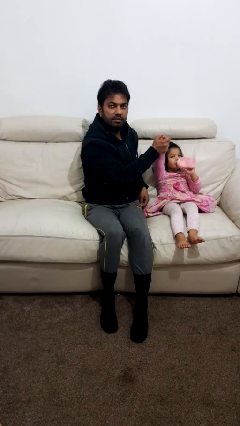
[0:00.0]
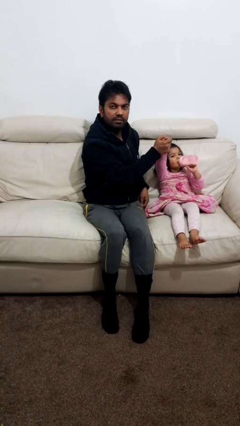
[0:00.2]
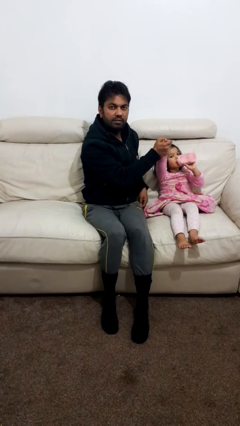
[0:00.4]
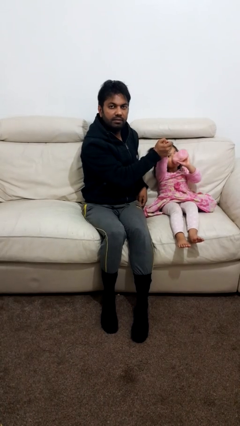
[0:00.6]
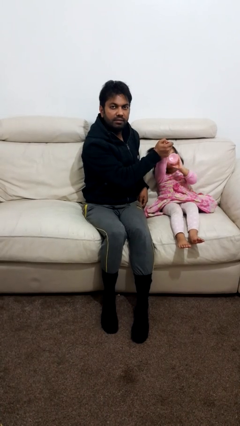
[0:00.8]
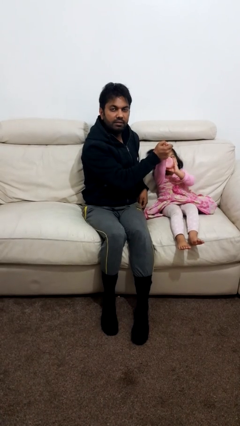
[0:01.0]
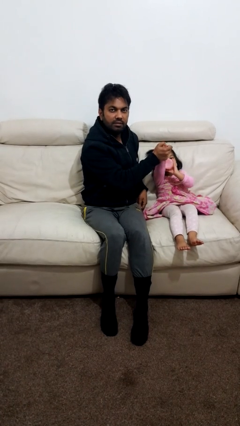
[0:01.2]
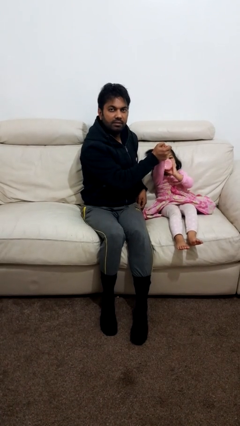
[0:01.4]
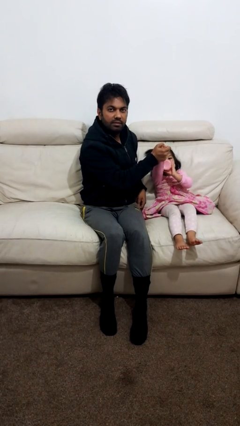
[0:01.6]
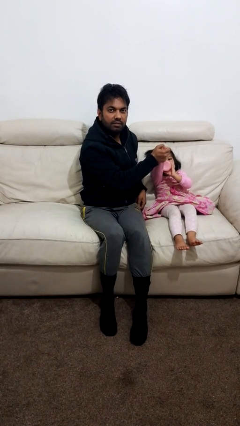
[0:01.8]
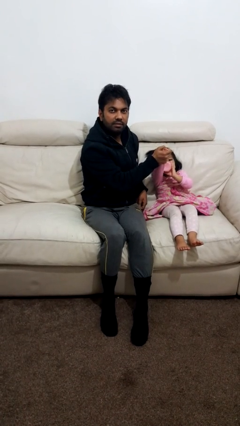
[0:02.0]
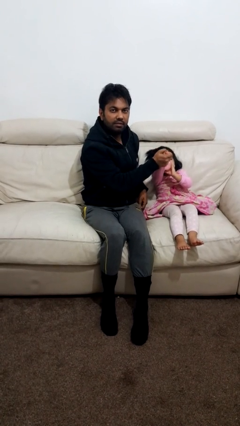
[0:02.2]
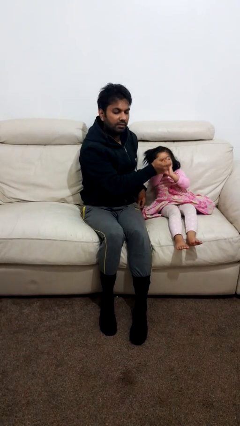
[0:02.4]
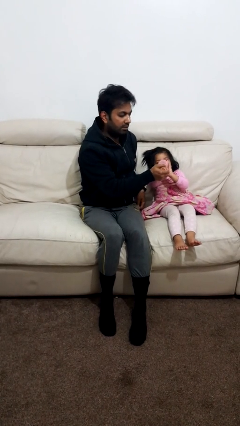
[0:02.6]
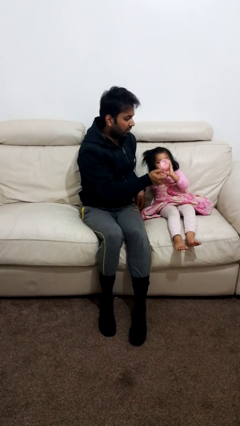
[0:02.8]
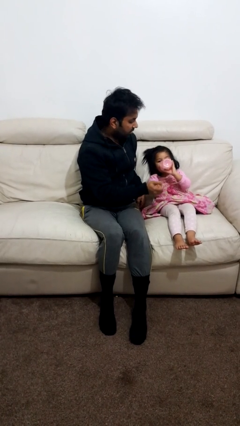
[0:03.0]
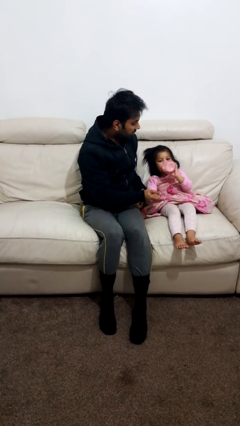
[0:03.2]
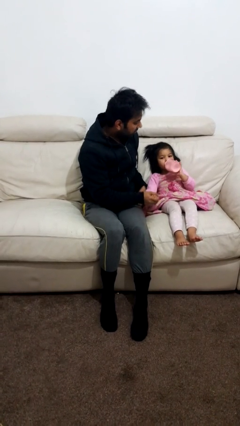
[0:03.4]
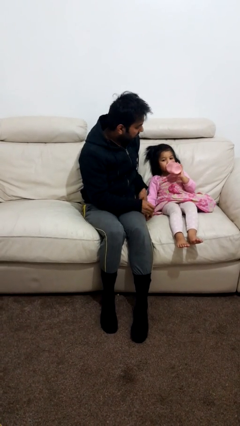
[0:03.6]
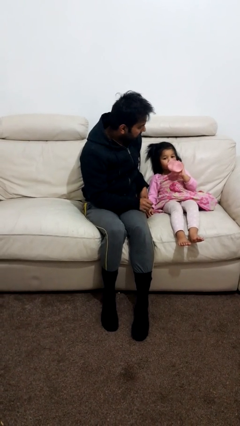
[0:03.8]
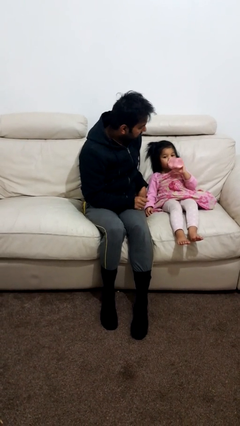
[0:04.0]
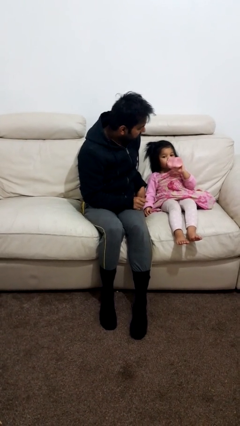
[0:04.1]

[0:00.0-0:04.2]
person highfives hand

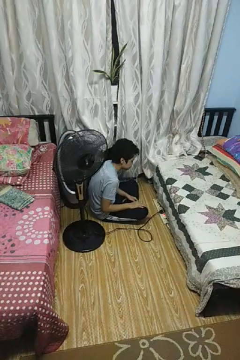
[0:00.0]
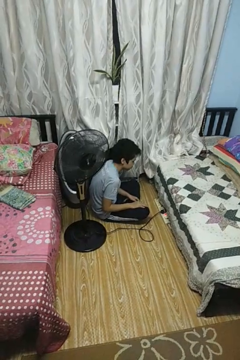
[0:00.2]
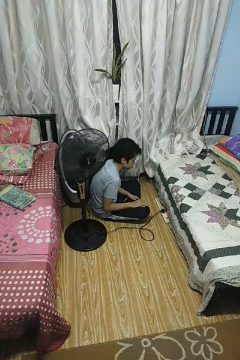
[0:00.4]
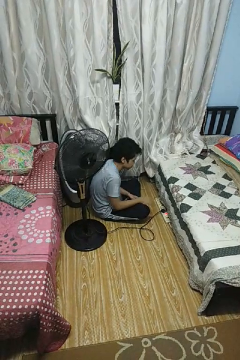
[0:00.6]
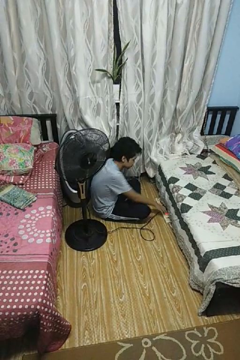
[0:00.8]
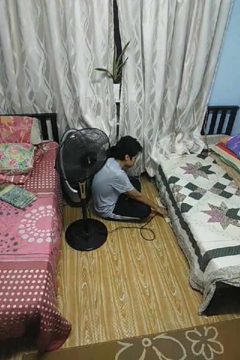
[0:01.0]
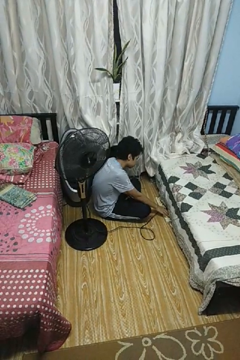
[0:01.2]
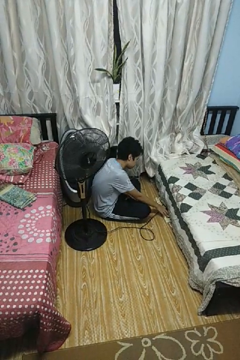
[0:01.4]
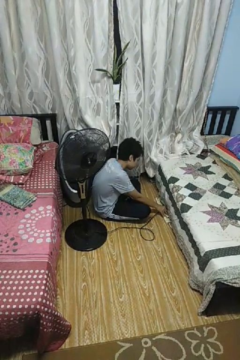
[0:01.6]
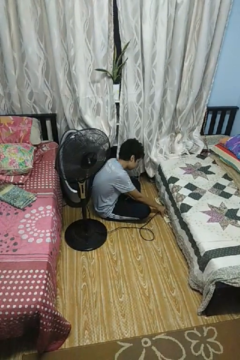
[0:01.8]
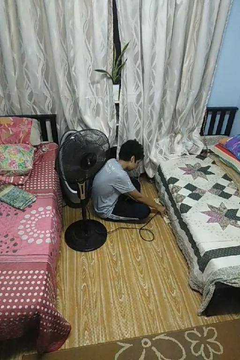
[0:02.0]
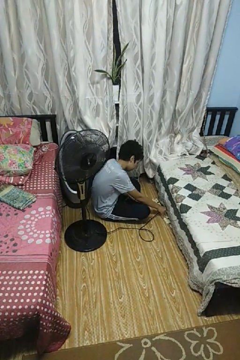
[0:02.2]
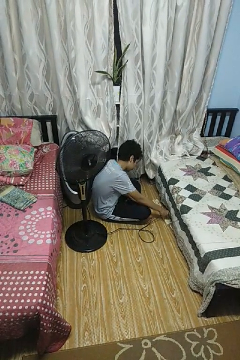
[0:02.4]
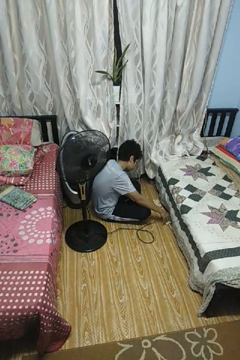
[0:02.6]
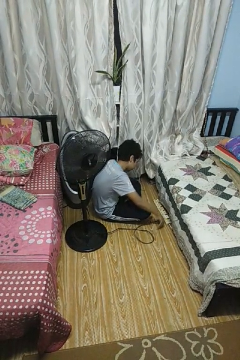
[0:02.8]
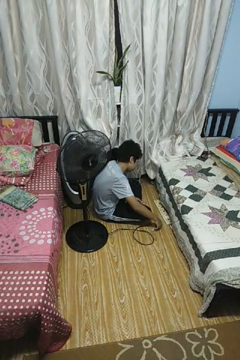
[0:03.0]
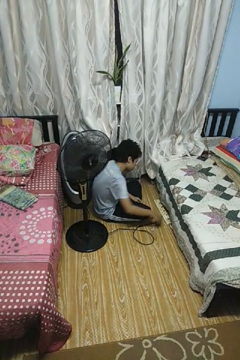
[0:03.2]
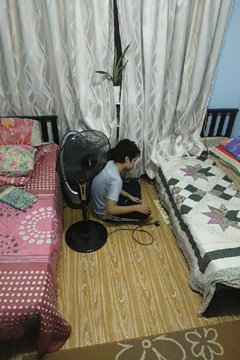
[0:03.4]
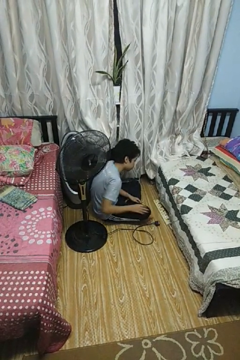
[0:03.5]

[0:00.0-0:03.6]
person unplugs from electrical socket

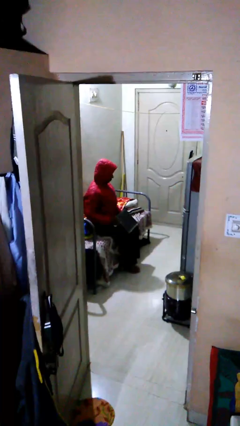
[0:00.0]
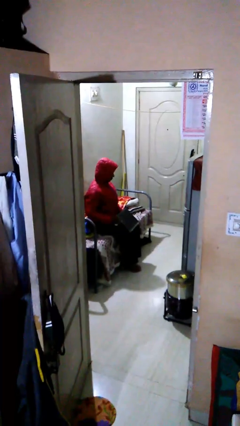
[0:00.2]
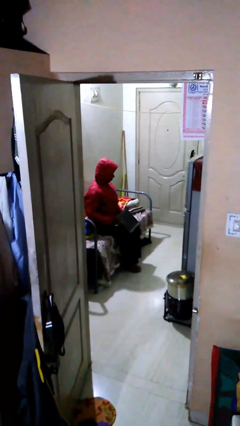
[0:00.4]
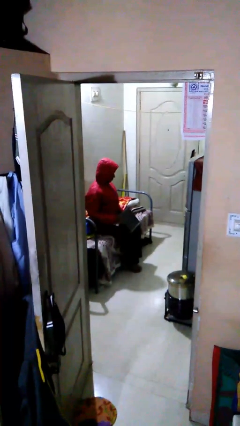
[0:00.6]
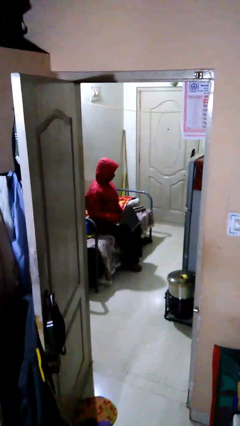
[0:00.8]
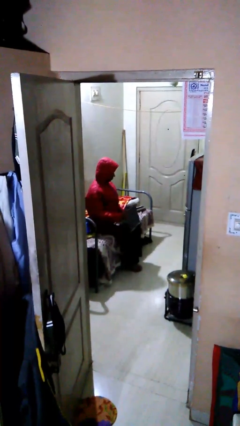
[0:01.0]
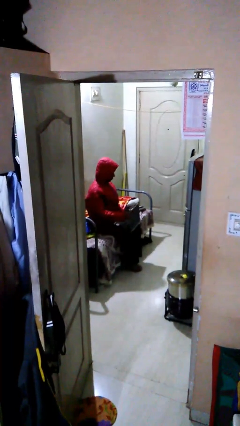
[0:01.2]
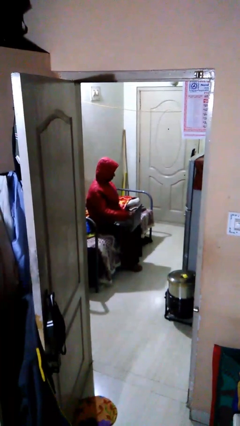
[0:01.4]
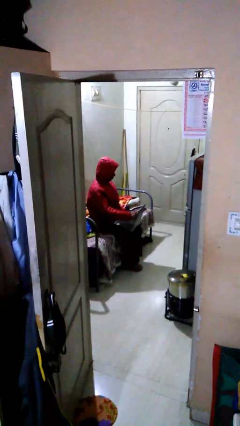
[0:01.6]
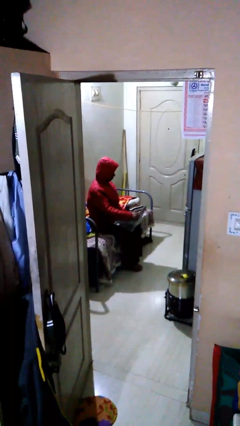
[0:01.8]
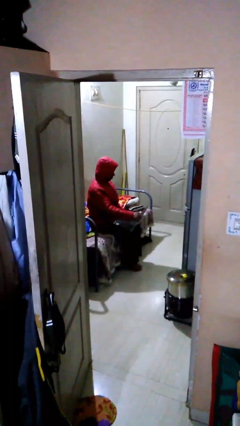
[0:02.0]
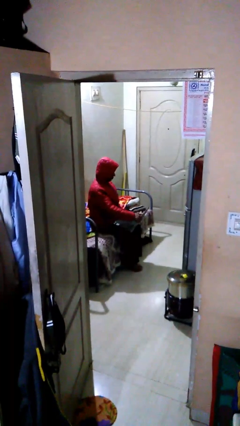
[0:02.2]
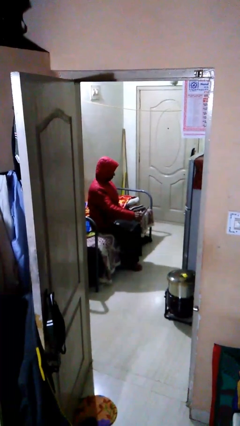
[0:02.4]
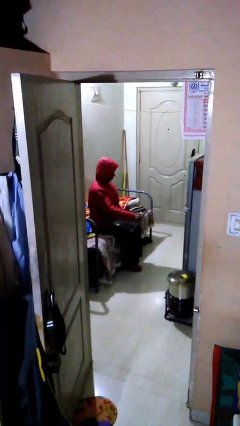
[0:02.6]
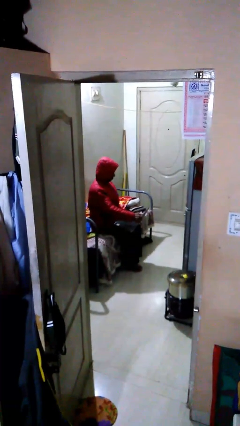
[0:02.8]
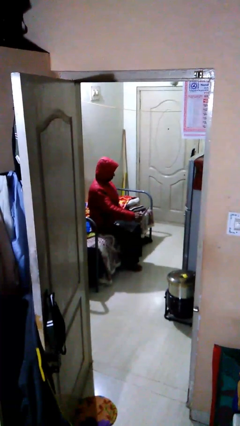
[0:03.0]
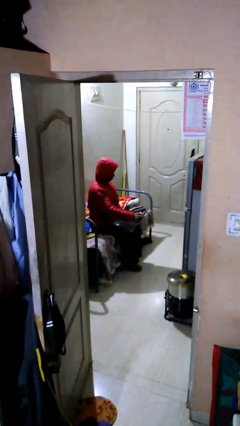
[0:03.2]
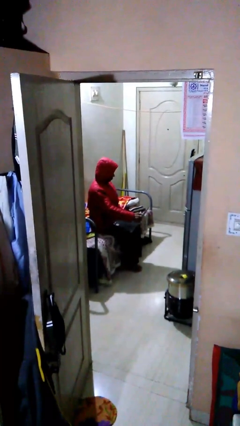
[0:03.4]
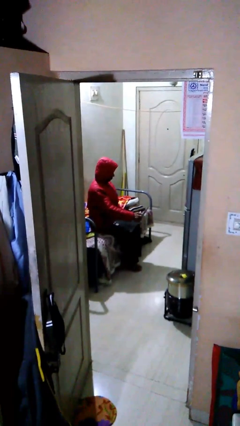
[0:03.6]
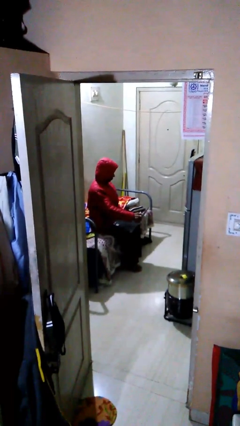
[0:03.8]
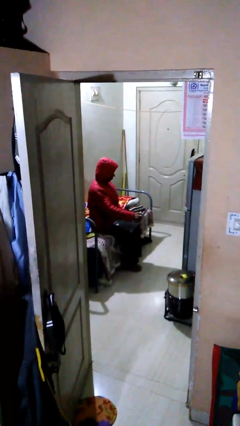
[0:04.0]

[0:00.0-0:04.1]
person interacts with laptop

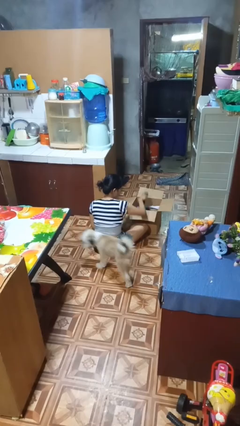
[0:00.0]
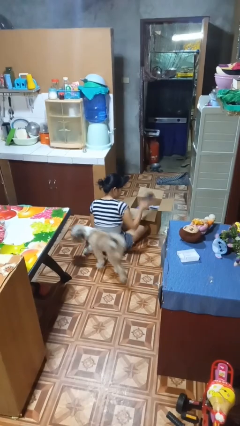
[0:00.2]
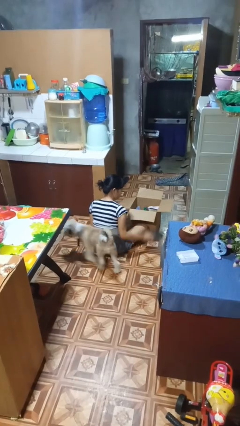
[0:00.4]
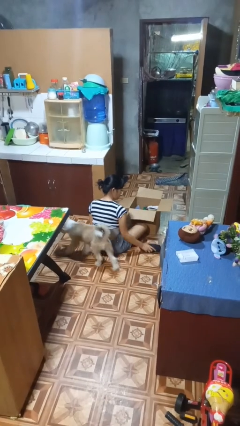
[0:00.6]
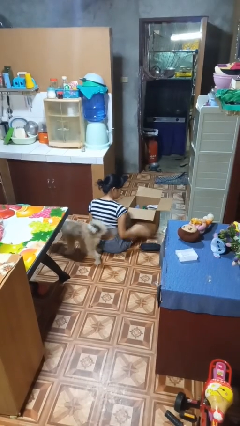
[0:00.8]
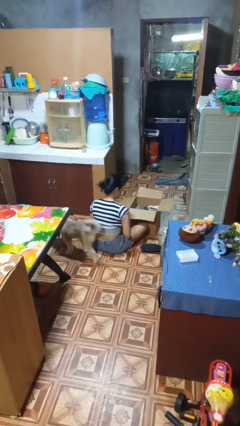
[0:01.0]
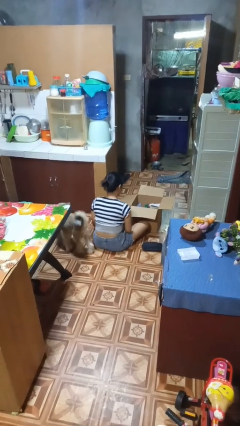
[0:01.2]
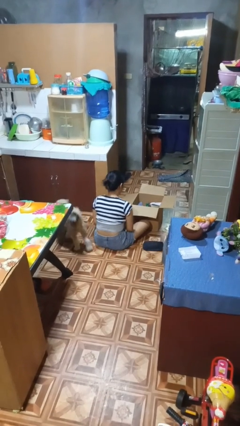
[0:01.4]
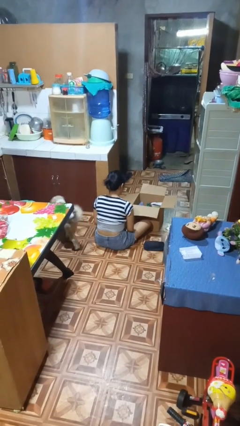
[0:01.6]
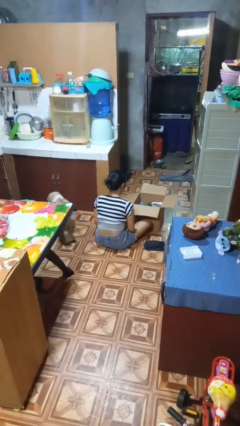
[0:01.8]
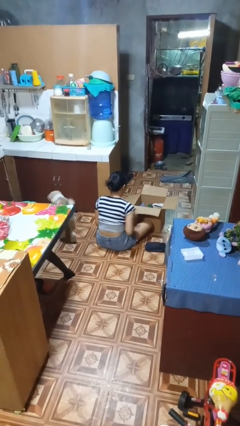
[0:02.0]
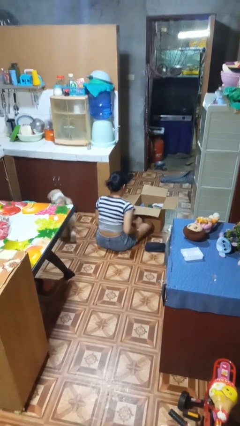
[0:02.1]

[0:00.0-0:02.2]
person takes object from box

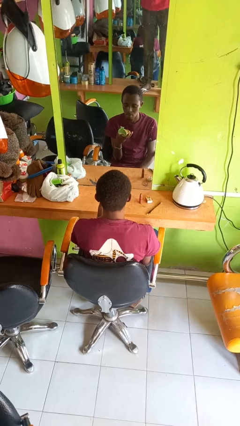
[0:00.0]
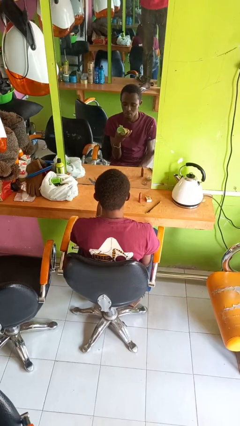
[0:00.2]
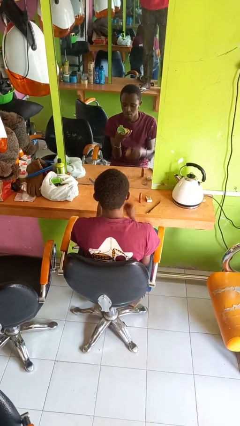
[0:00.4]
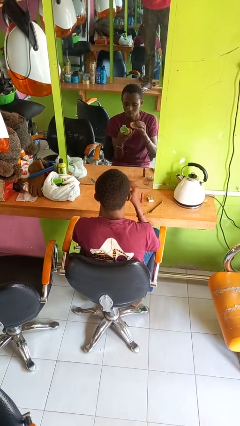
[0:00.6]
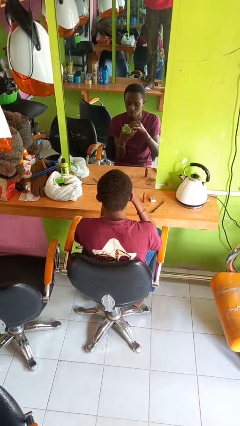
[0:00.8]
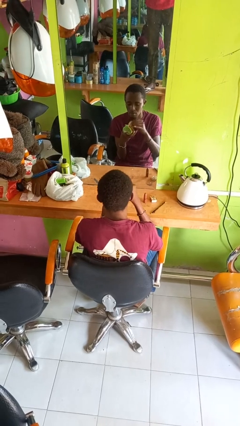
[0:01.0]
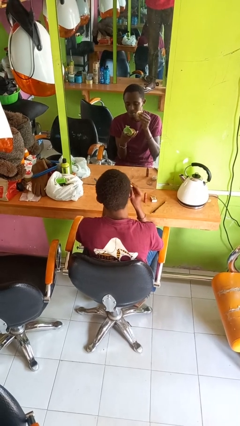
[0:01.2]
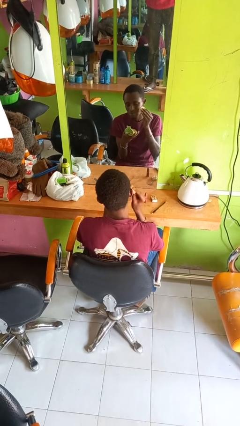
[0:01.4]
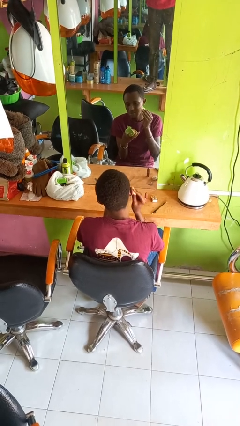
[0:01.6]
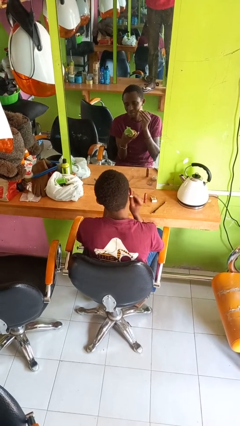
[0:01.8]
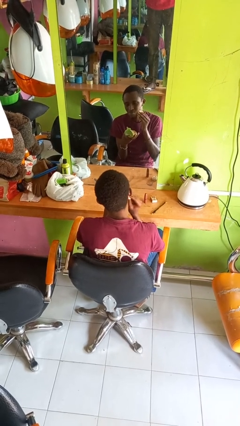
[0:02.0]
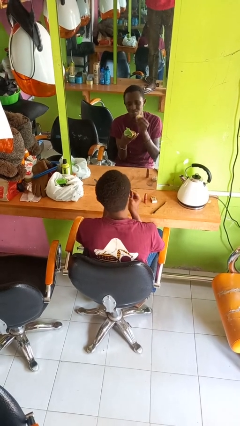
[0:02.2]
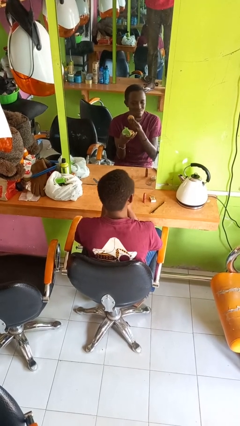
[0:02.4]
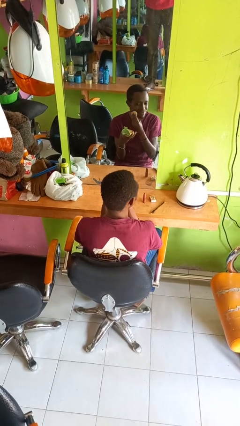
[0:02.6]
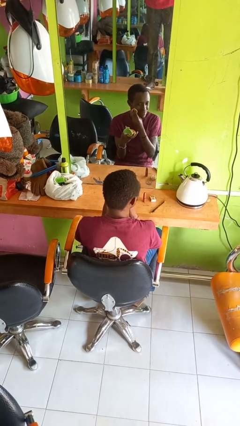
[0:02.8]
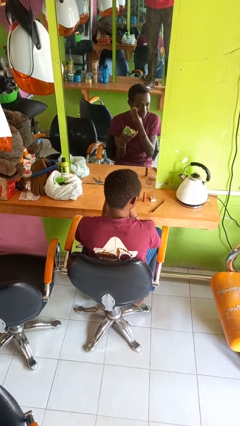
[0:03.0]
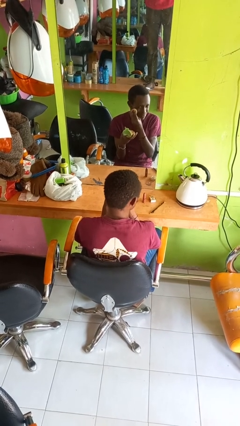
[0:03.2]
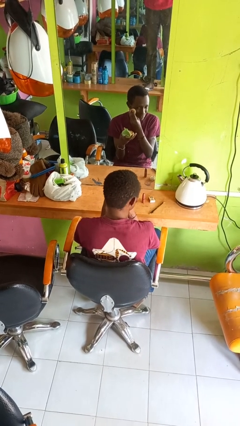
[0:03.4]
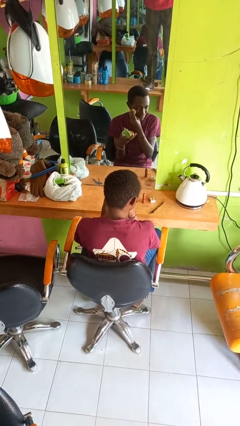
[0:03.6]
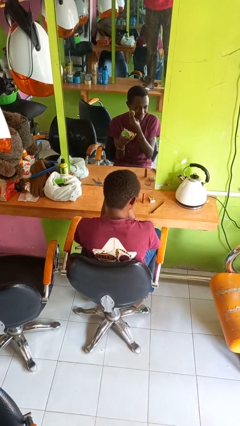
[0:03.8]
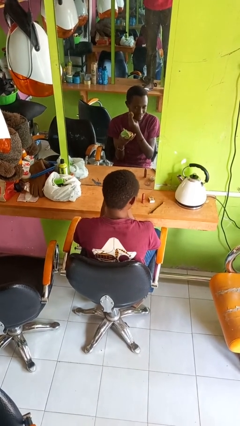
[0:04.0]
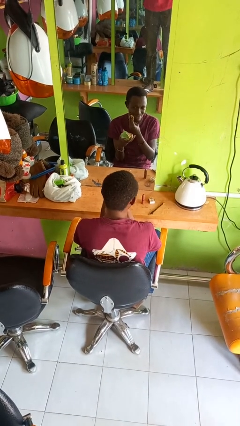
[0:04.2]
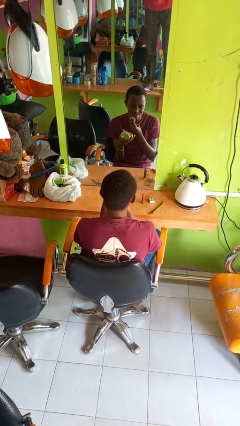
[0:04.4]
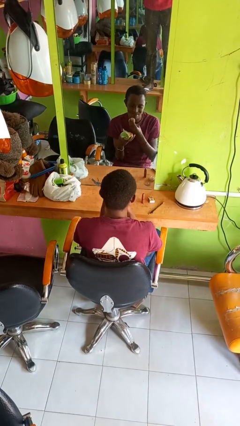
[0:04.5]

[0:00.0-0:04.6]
person applies foundation makeup
